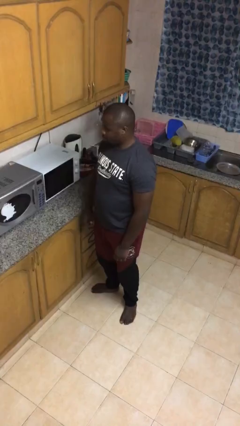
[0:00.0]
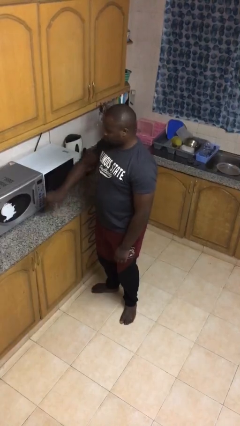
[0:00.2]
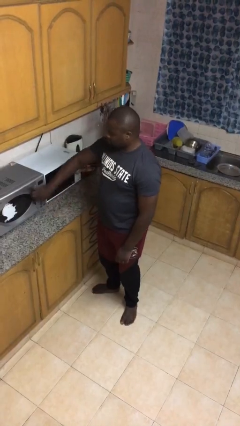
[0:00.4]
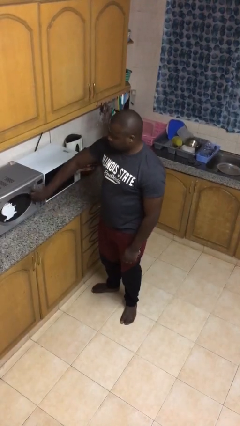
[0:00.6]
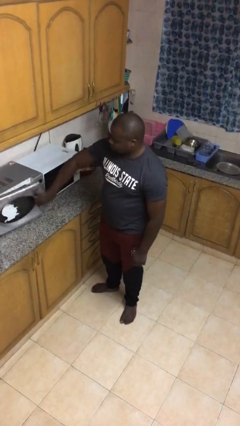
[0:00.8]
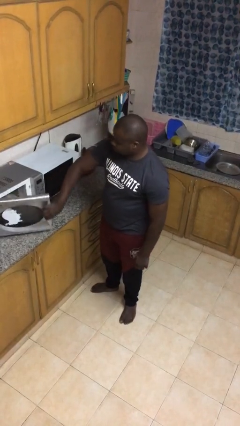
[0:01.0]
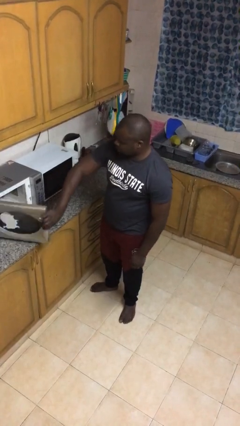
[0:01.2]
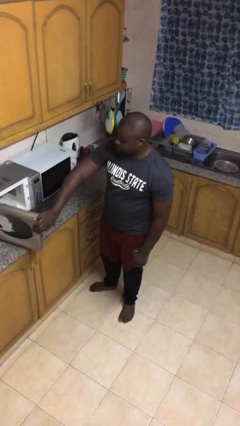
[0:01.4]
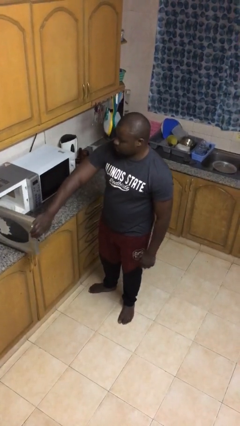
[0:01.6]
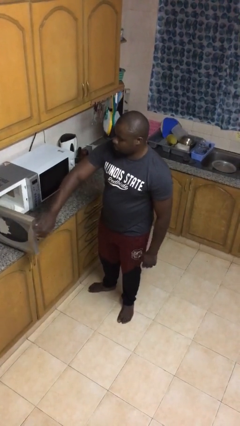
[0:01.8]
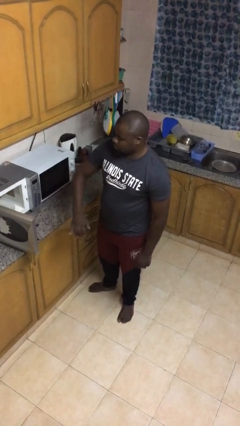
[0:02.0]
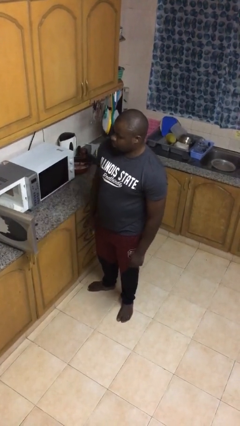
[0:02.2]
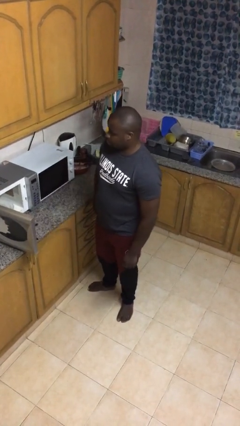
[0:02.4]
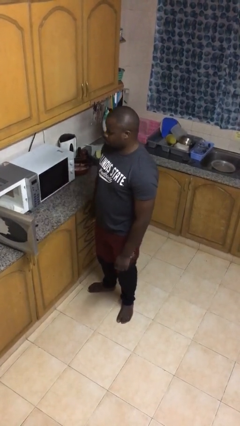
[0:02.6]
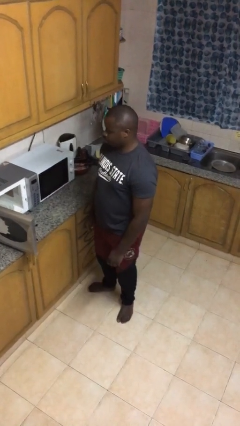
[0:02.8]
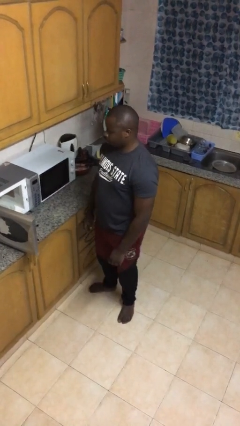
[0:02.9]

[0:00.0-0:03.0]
person opens microwave

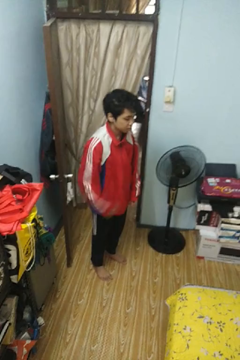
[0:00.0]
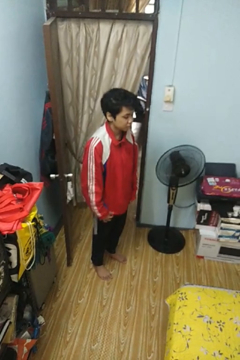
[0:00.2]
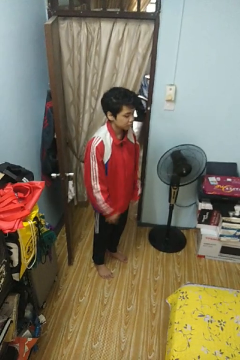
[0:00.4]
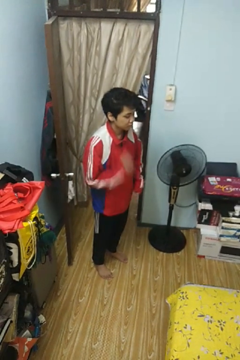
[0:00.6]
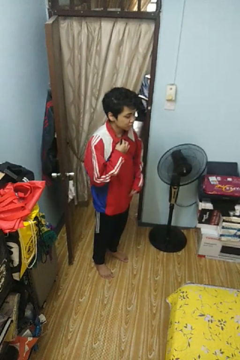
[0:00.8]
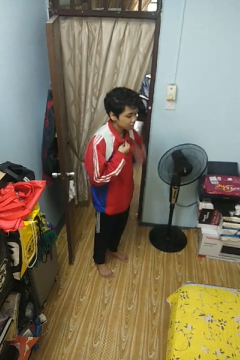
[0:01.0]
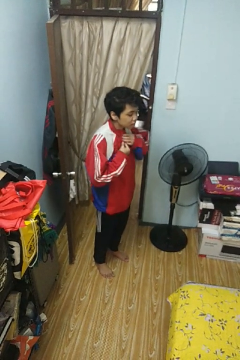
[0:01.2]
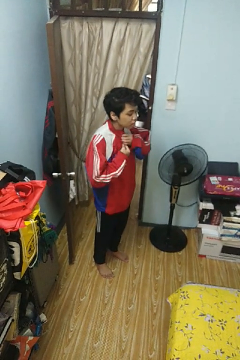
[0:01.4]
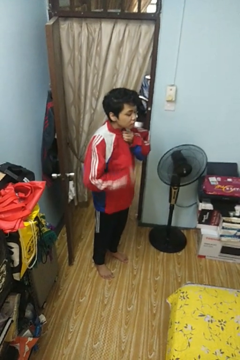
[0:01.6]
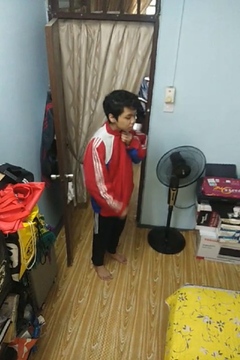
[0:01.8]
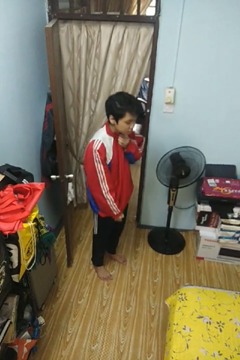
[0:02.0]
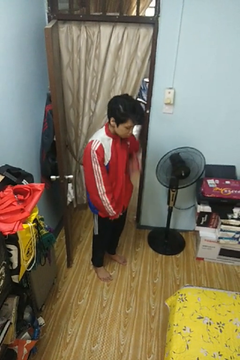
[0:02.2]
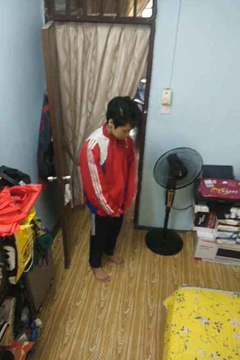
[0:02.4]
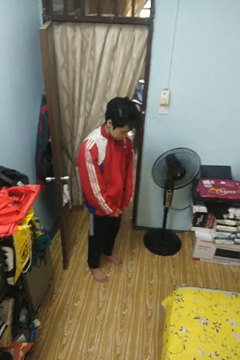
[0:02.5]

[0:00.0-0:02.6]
person unzips jacket

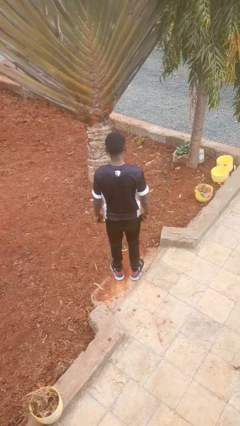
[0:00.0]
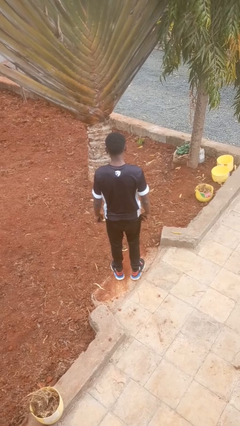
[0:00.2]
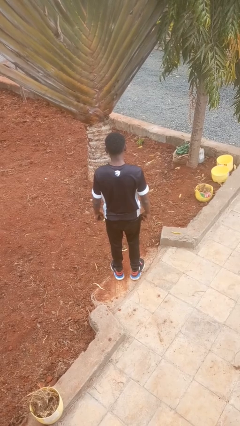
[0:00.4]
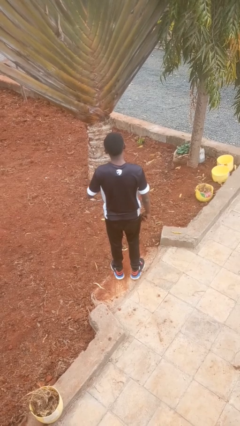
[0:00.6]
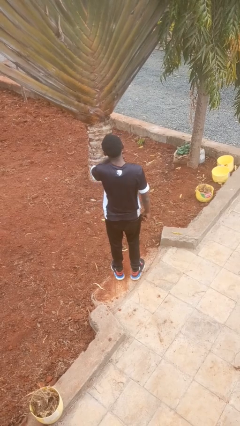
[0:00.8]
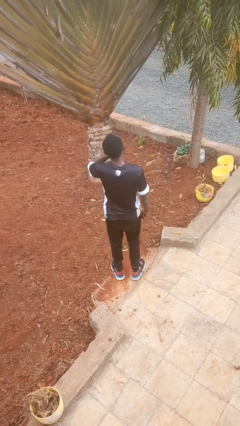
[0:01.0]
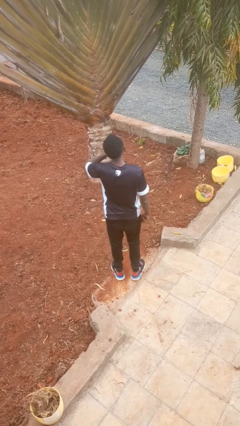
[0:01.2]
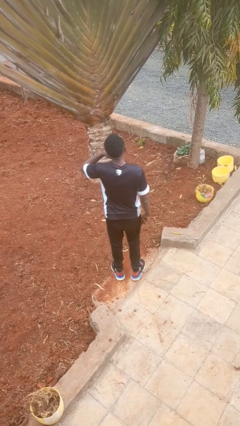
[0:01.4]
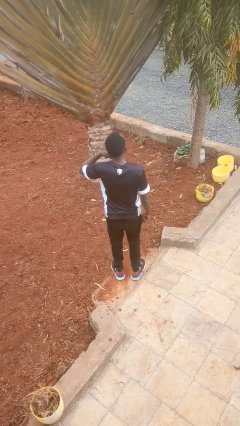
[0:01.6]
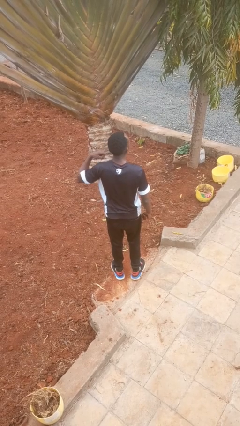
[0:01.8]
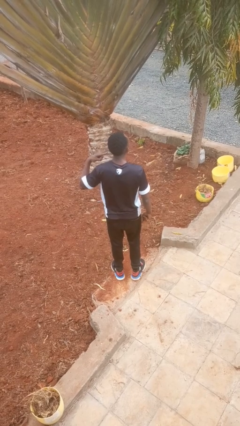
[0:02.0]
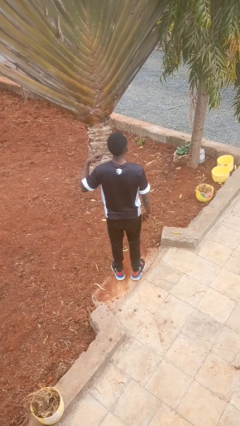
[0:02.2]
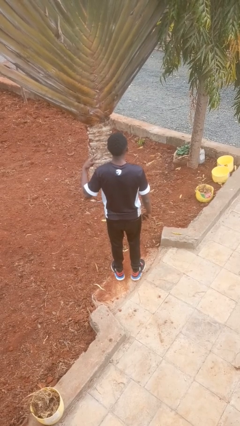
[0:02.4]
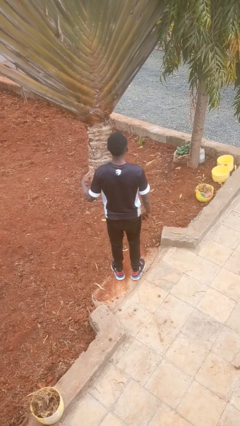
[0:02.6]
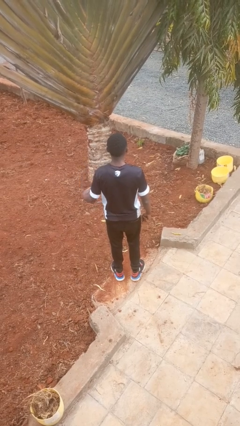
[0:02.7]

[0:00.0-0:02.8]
person gestures cut

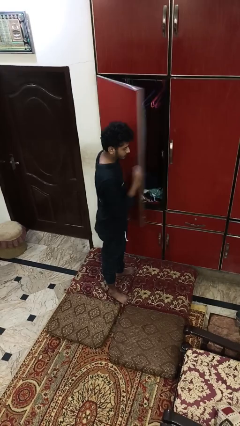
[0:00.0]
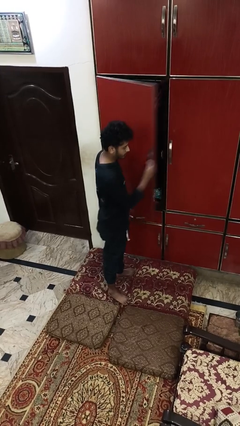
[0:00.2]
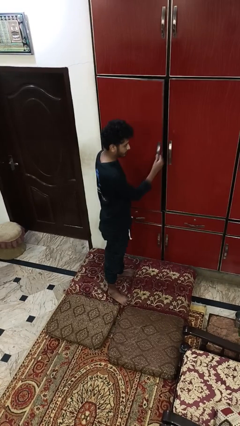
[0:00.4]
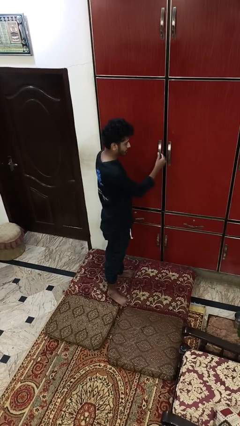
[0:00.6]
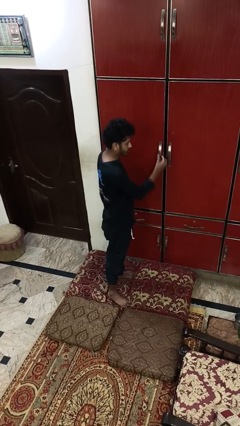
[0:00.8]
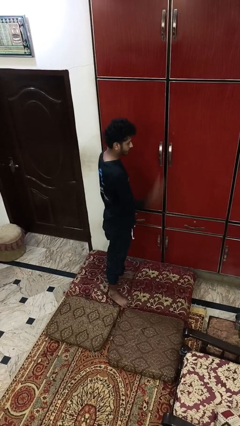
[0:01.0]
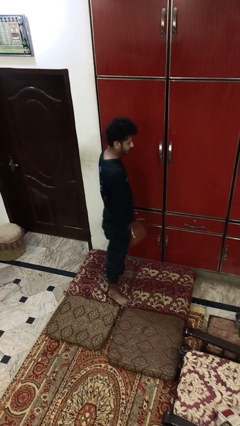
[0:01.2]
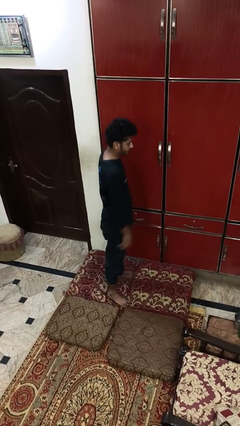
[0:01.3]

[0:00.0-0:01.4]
person closes closet door

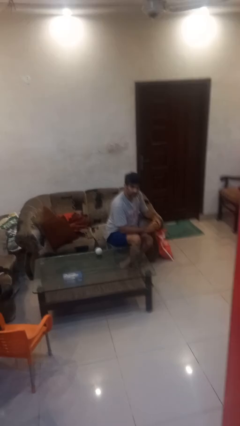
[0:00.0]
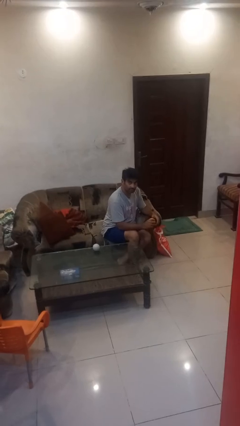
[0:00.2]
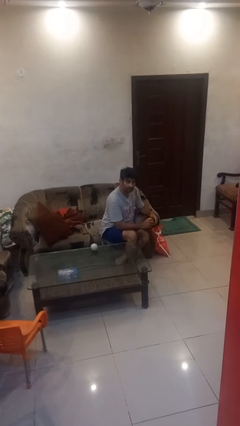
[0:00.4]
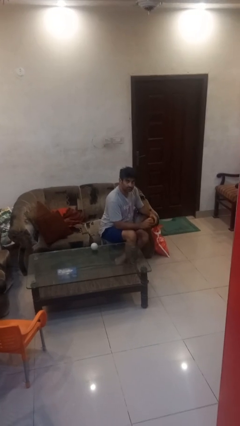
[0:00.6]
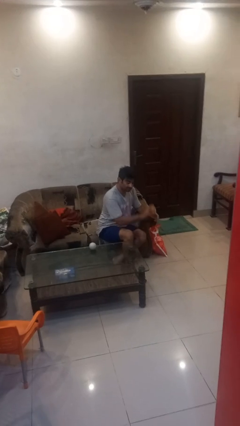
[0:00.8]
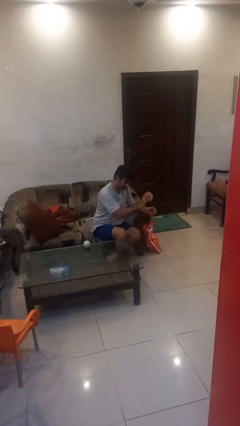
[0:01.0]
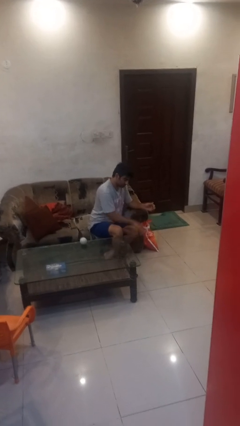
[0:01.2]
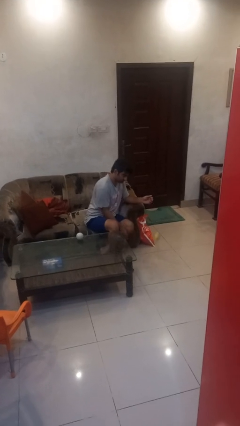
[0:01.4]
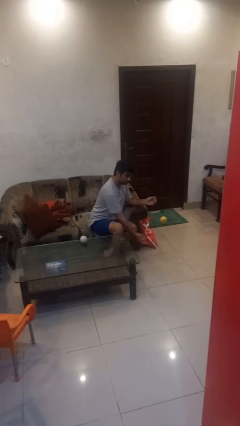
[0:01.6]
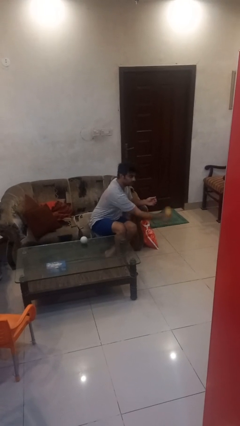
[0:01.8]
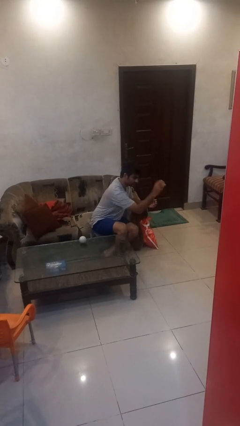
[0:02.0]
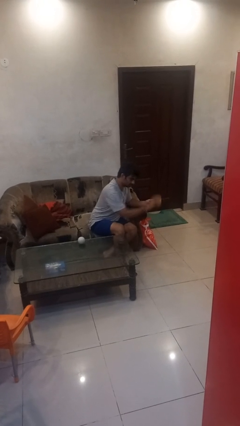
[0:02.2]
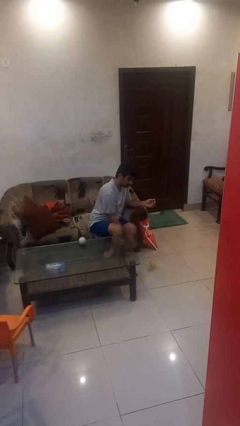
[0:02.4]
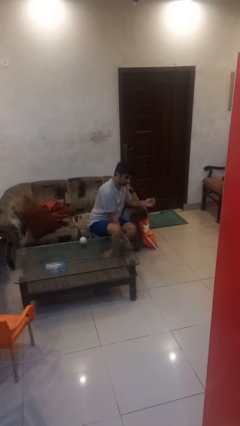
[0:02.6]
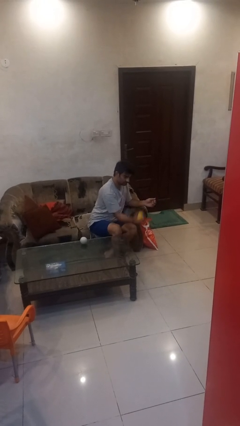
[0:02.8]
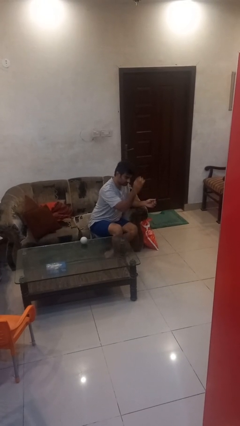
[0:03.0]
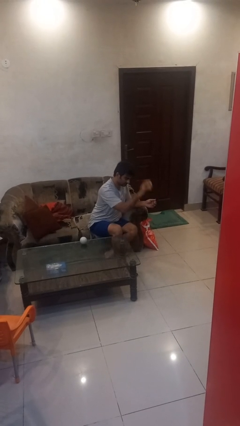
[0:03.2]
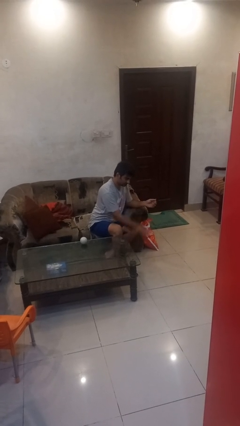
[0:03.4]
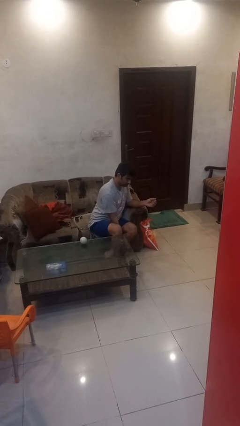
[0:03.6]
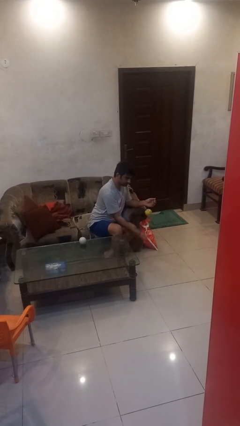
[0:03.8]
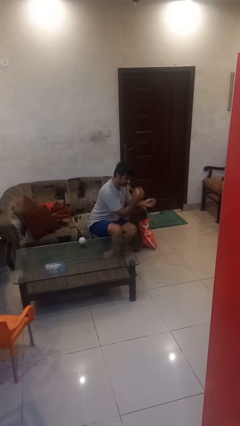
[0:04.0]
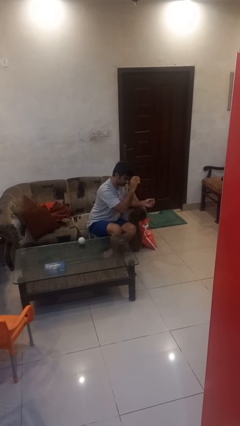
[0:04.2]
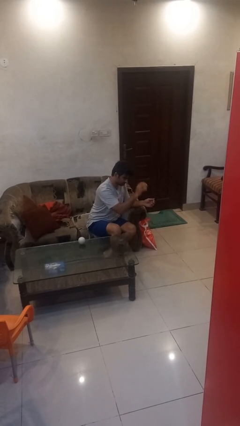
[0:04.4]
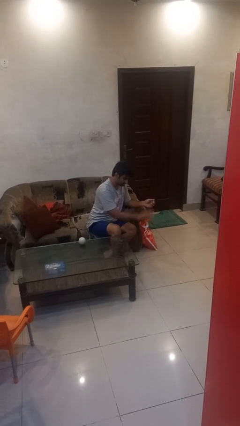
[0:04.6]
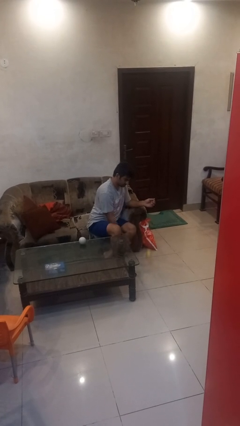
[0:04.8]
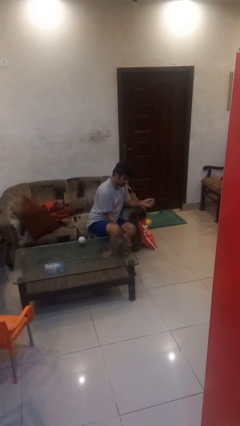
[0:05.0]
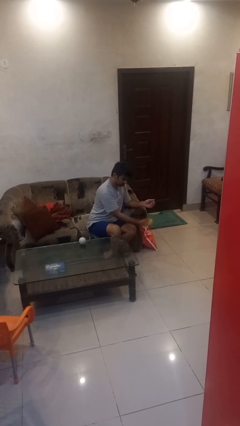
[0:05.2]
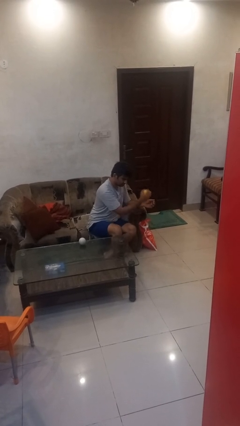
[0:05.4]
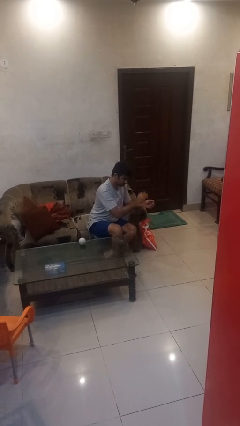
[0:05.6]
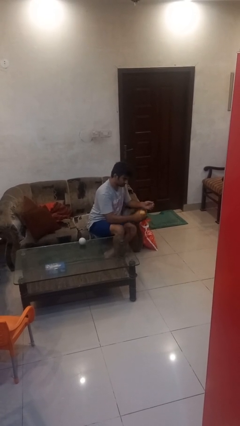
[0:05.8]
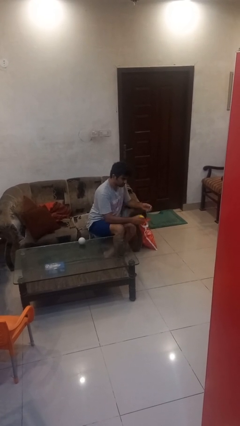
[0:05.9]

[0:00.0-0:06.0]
person bounces ball on floor

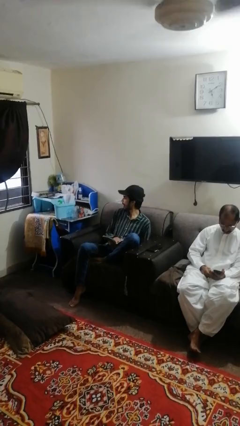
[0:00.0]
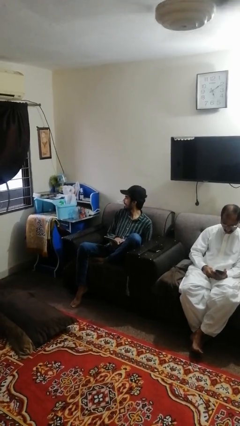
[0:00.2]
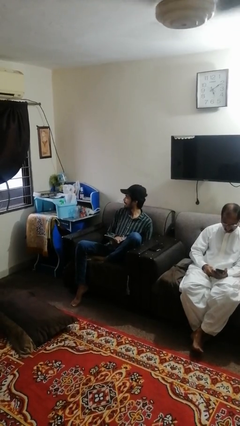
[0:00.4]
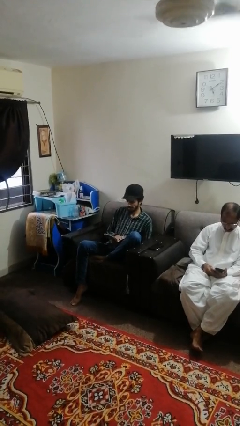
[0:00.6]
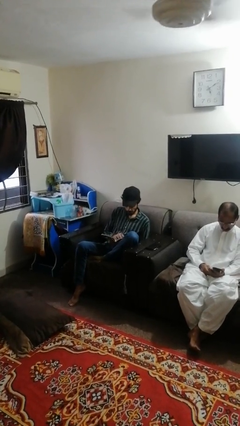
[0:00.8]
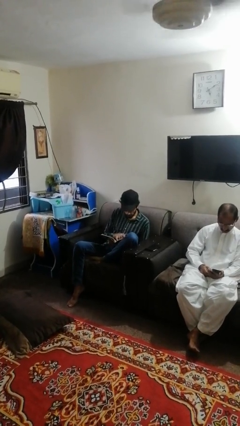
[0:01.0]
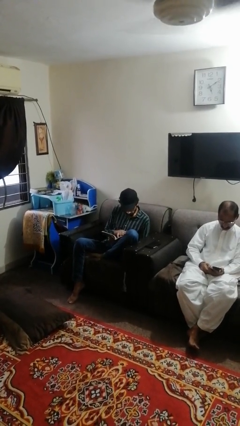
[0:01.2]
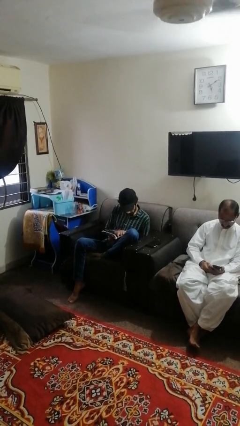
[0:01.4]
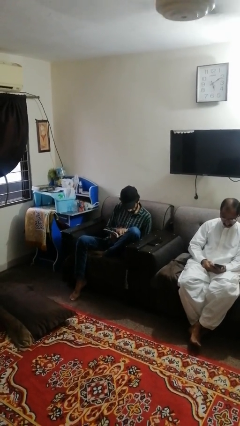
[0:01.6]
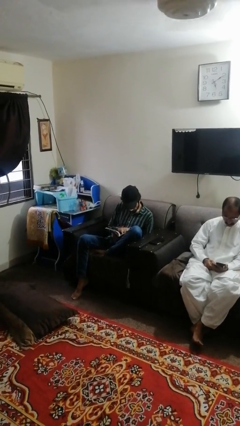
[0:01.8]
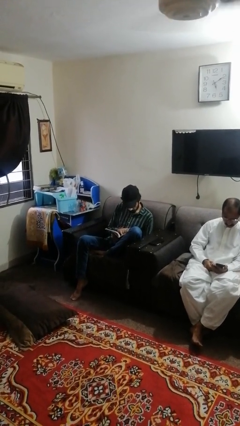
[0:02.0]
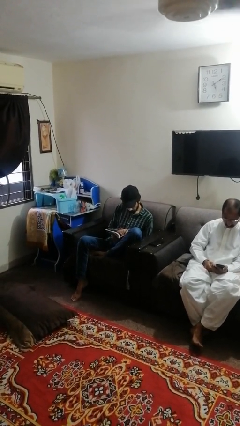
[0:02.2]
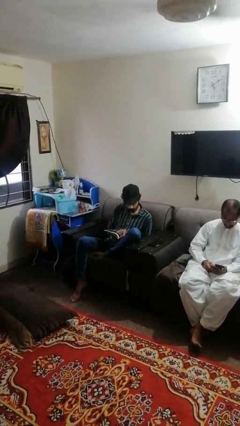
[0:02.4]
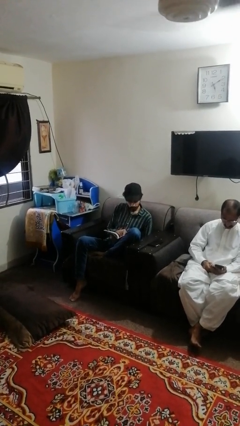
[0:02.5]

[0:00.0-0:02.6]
person reads book
